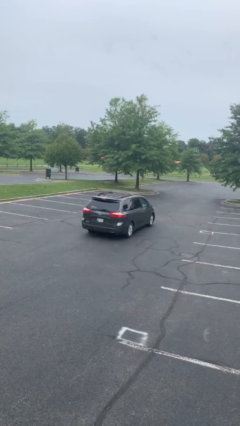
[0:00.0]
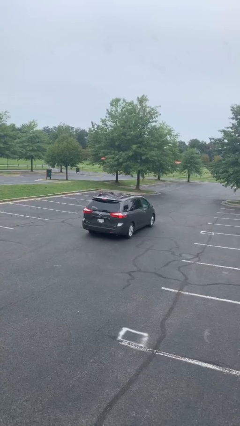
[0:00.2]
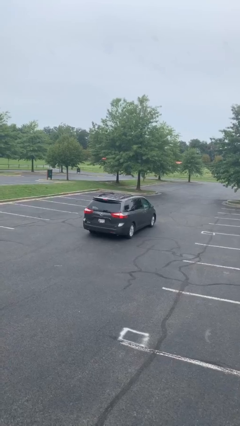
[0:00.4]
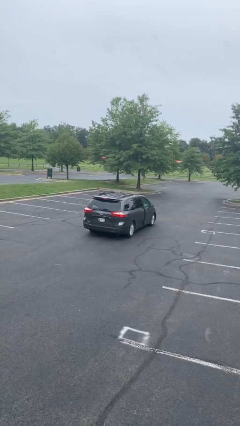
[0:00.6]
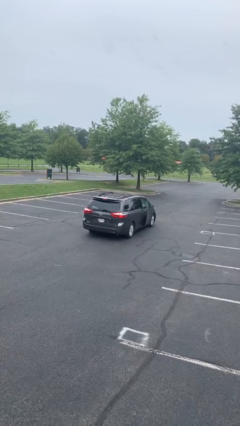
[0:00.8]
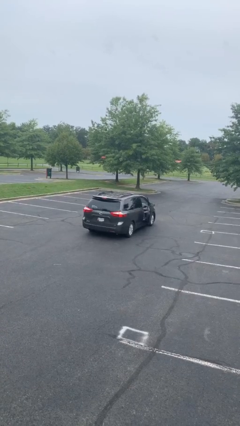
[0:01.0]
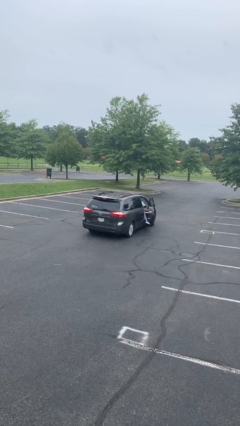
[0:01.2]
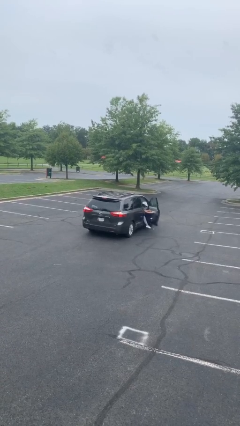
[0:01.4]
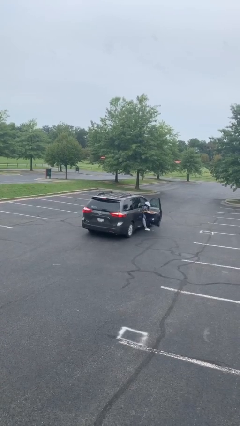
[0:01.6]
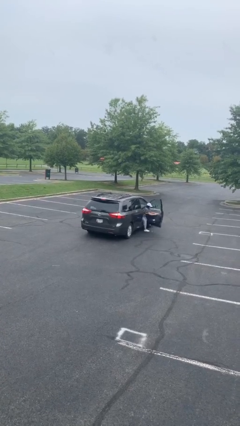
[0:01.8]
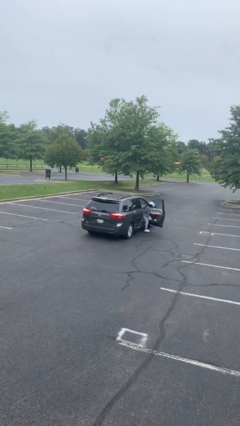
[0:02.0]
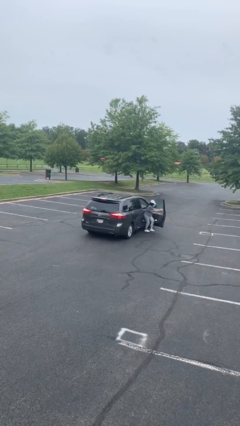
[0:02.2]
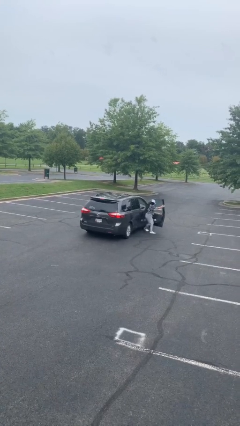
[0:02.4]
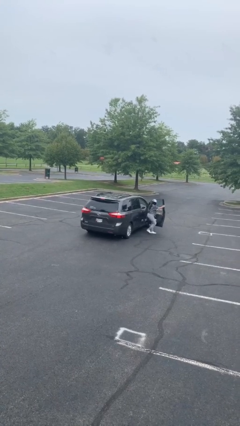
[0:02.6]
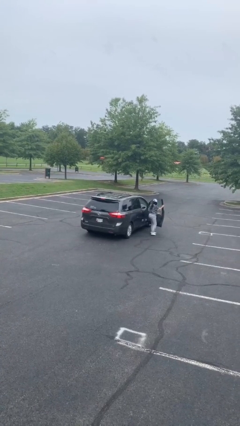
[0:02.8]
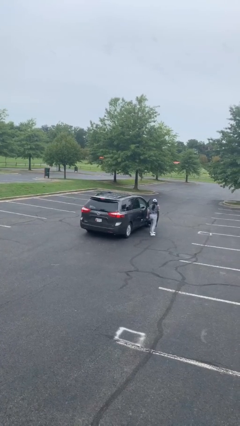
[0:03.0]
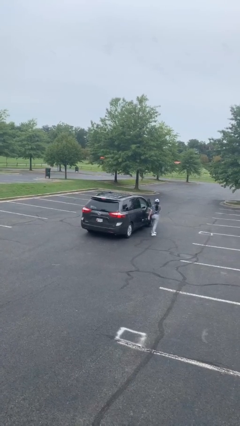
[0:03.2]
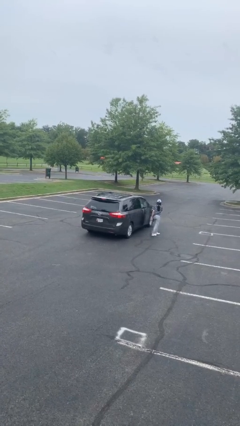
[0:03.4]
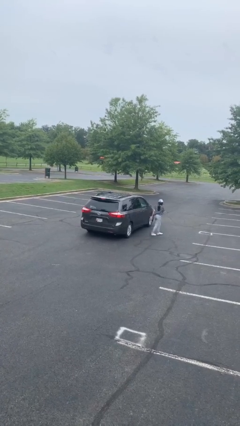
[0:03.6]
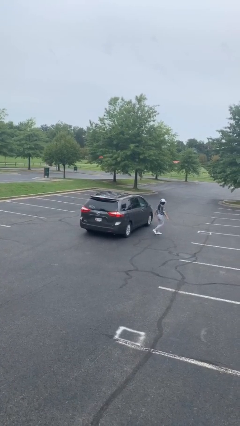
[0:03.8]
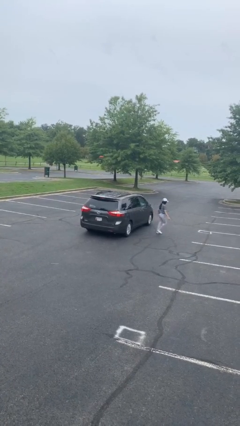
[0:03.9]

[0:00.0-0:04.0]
car drops off person

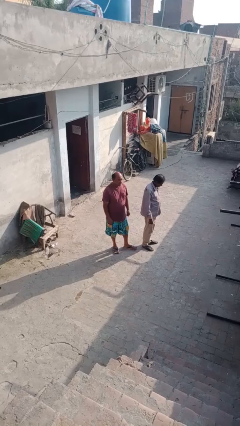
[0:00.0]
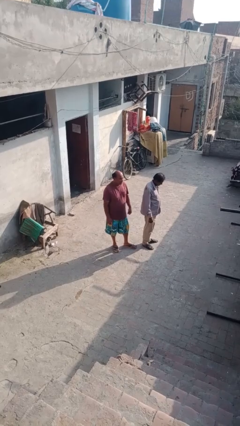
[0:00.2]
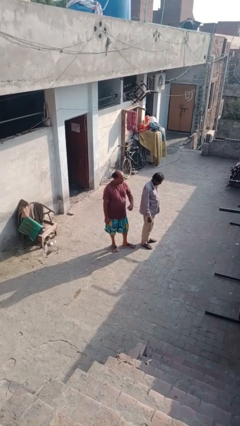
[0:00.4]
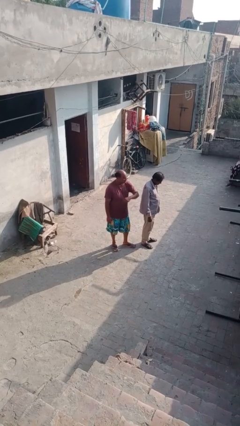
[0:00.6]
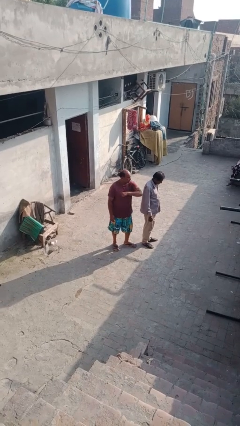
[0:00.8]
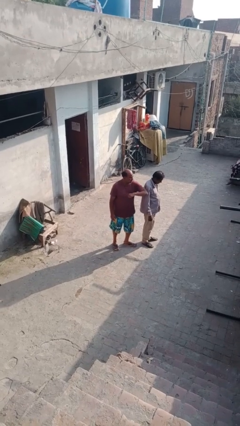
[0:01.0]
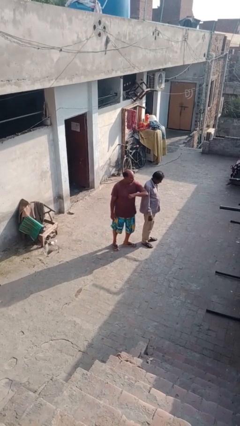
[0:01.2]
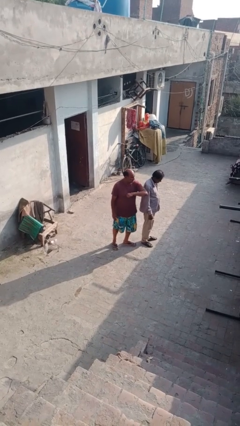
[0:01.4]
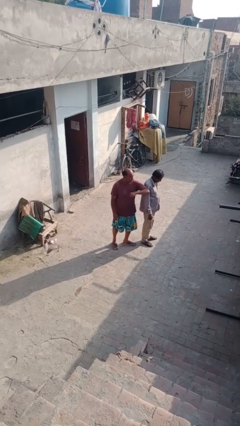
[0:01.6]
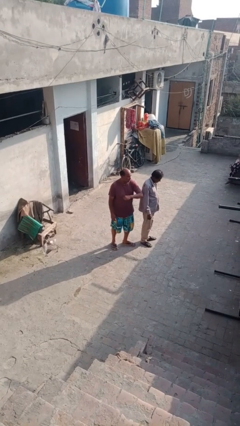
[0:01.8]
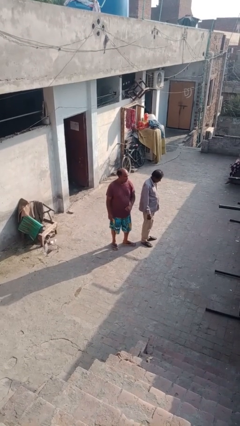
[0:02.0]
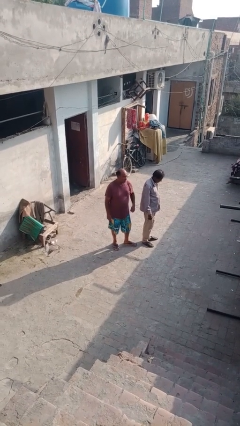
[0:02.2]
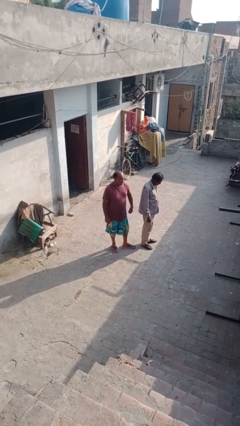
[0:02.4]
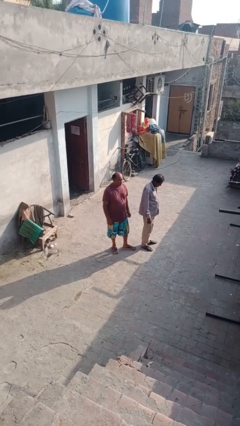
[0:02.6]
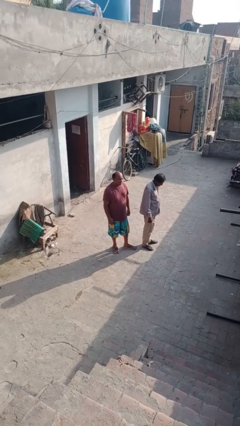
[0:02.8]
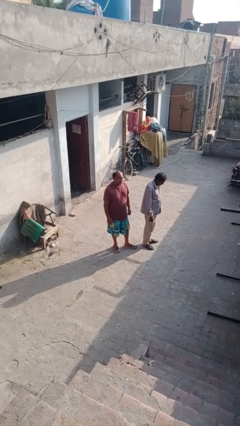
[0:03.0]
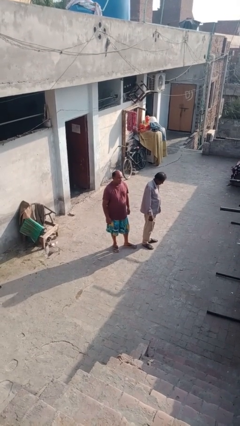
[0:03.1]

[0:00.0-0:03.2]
person nudges person with elbow

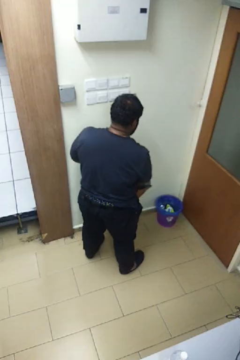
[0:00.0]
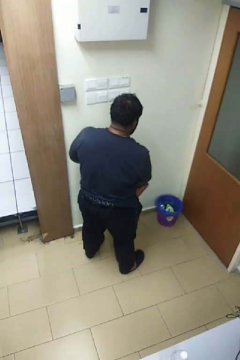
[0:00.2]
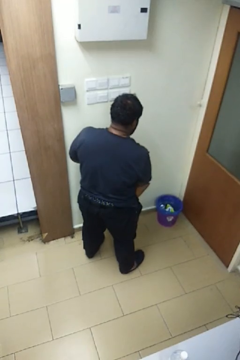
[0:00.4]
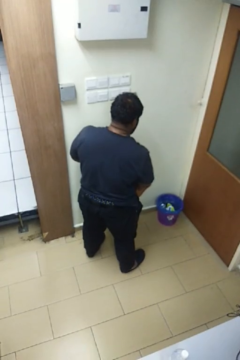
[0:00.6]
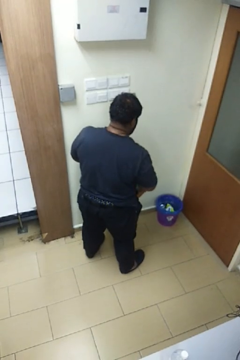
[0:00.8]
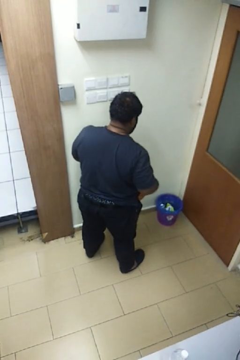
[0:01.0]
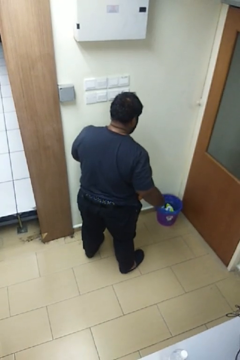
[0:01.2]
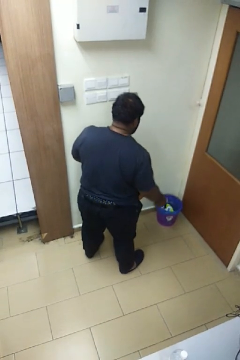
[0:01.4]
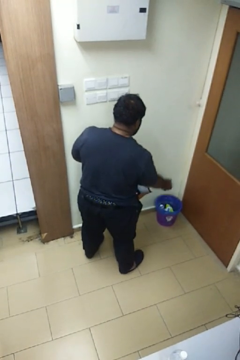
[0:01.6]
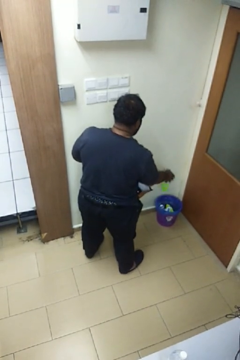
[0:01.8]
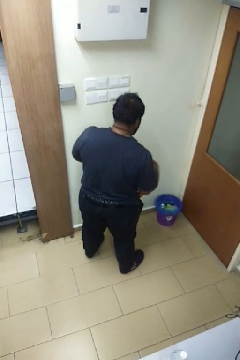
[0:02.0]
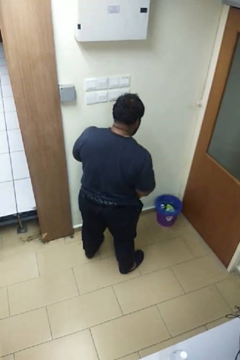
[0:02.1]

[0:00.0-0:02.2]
person discards trash

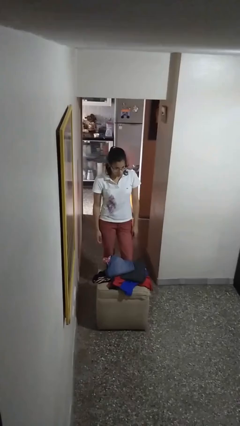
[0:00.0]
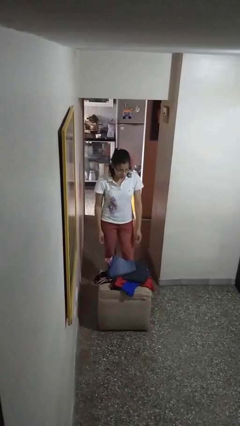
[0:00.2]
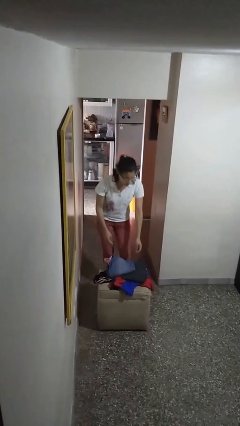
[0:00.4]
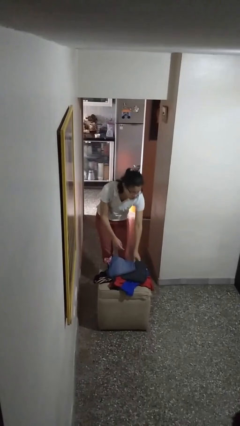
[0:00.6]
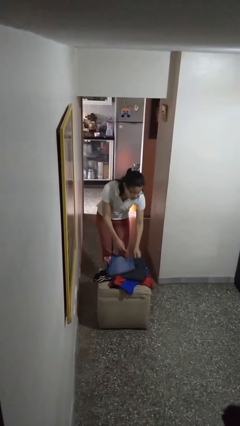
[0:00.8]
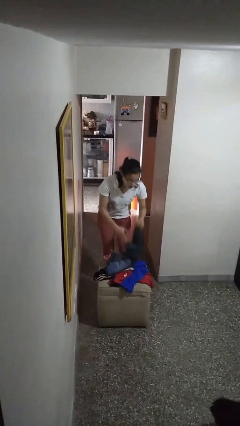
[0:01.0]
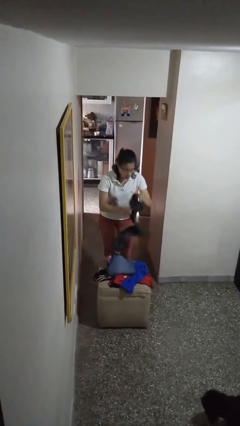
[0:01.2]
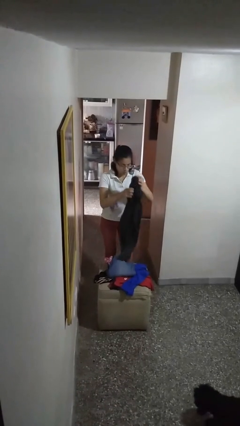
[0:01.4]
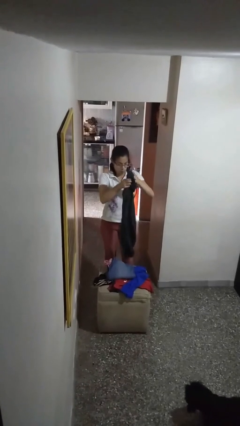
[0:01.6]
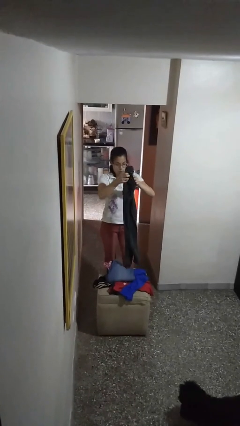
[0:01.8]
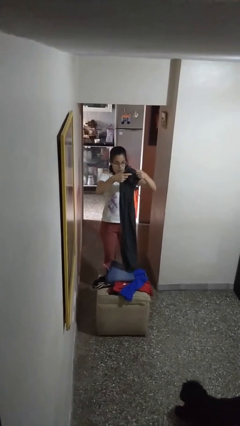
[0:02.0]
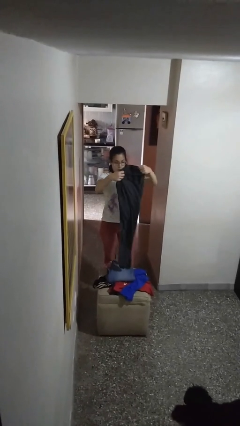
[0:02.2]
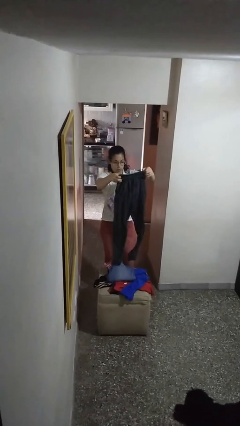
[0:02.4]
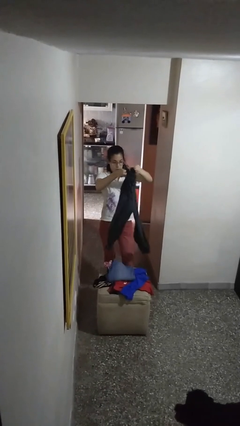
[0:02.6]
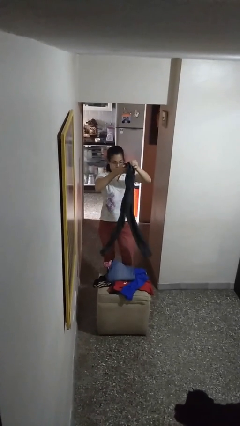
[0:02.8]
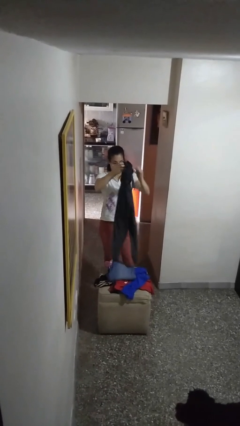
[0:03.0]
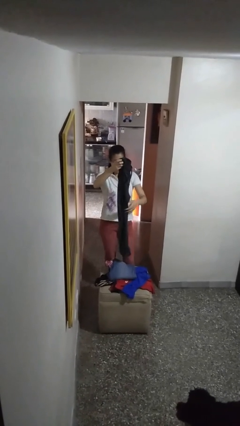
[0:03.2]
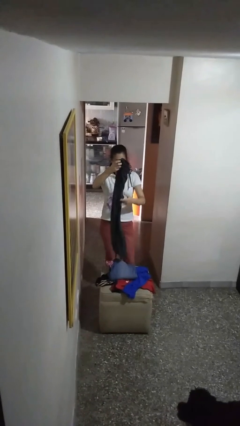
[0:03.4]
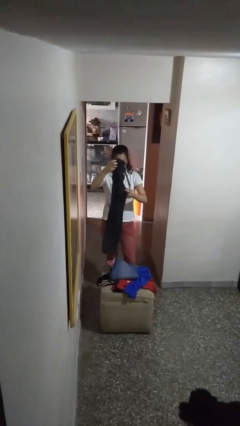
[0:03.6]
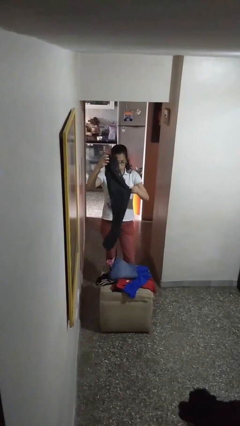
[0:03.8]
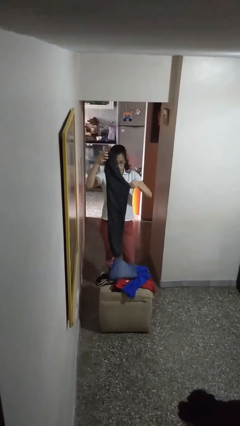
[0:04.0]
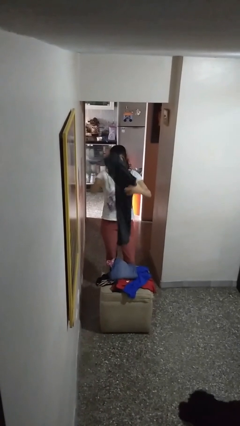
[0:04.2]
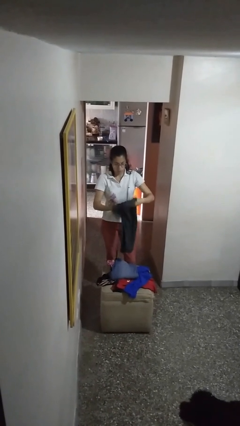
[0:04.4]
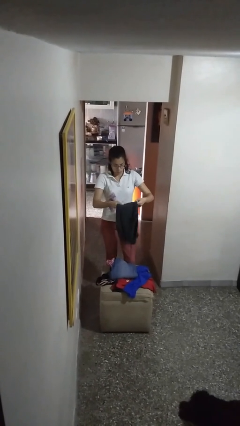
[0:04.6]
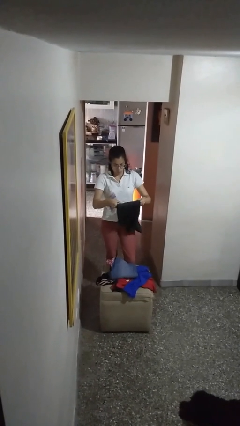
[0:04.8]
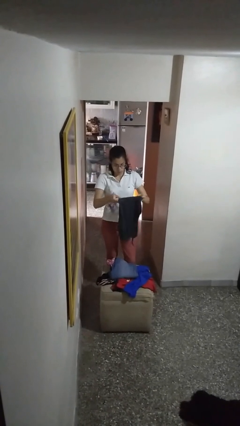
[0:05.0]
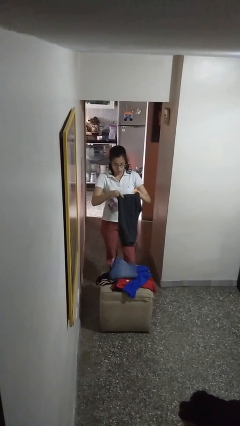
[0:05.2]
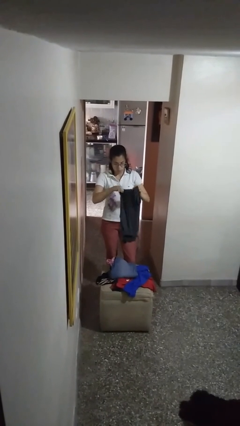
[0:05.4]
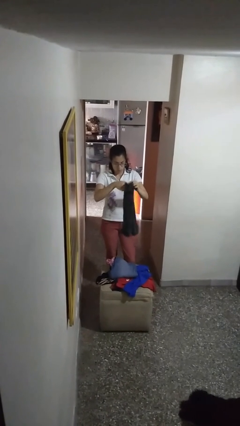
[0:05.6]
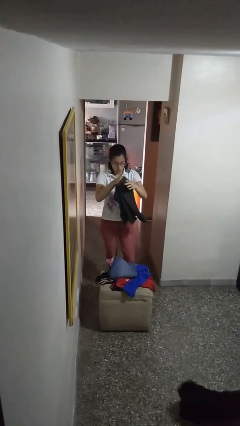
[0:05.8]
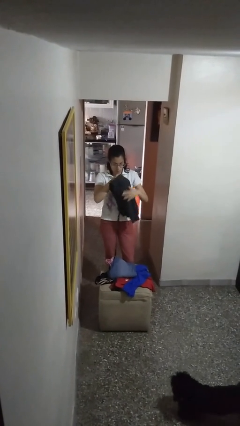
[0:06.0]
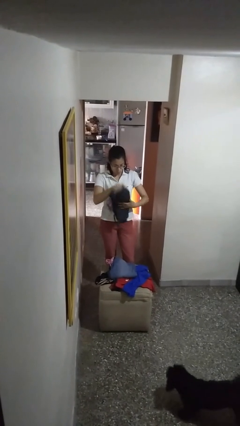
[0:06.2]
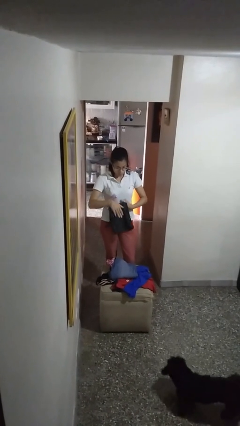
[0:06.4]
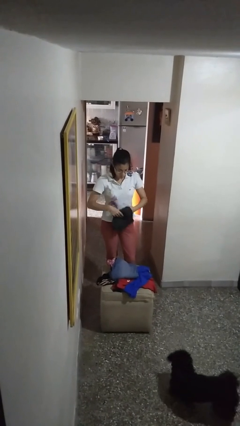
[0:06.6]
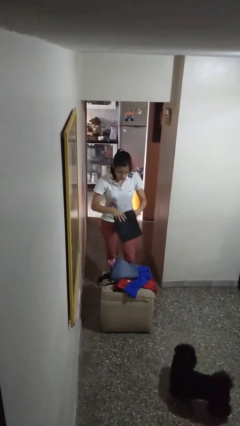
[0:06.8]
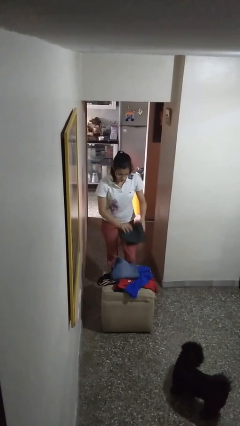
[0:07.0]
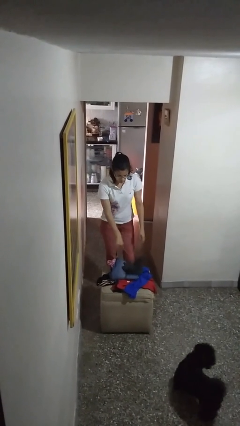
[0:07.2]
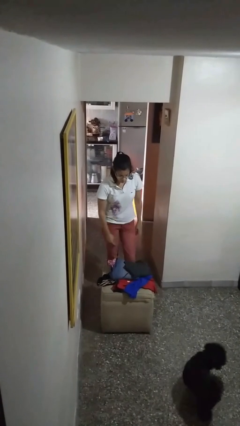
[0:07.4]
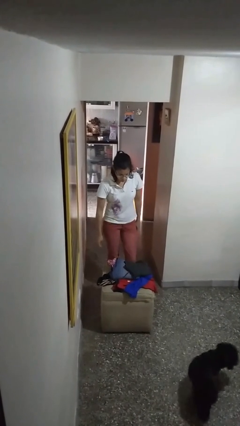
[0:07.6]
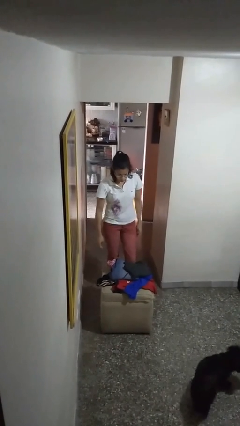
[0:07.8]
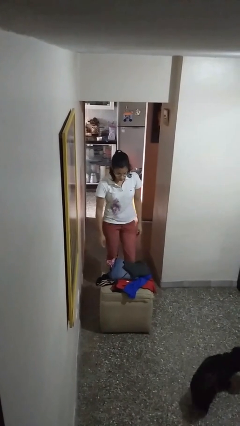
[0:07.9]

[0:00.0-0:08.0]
person folds pants

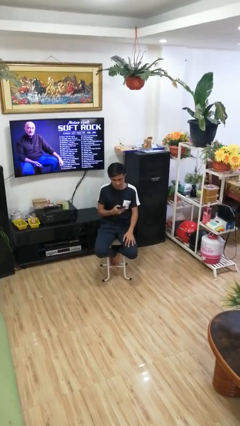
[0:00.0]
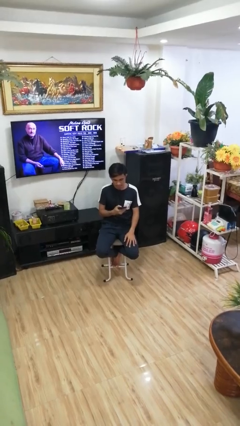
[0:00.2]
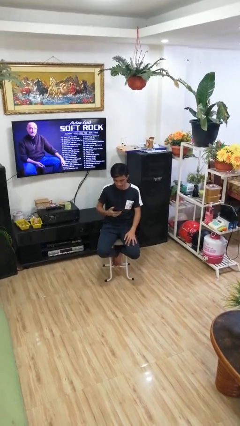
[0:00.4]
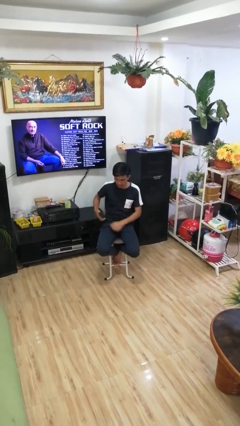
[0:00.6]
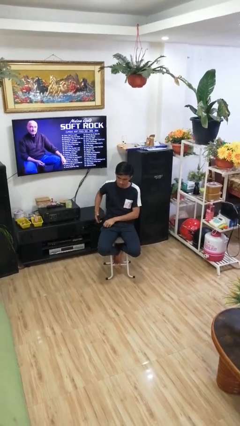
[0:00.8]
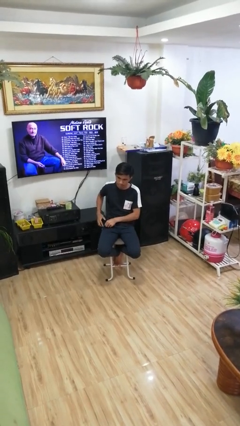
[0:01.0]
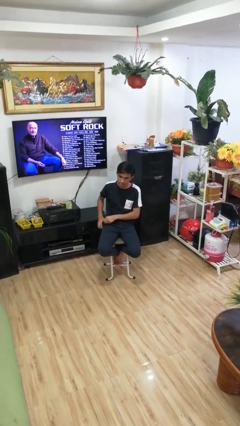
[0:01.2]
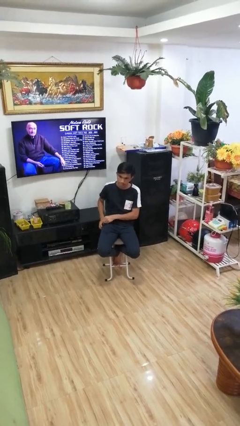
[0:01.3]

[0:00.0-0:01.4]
person puts phone into pocket
